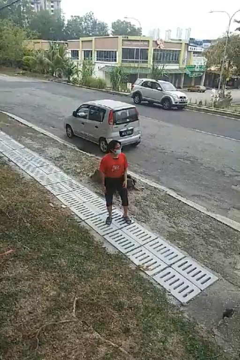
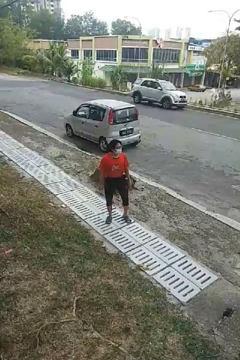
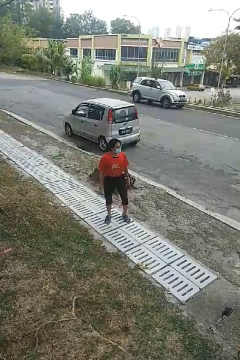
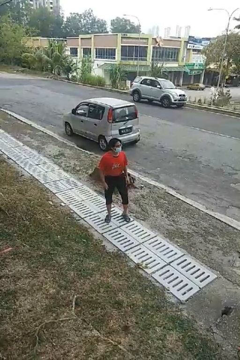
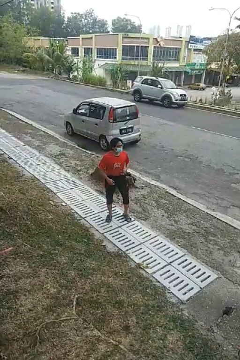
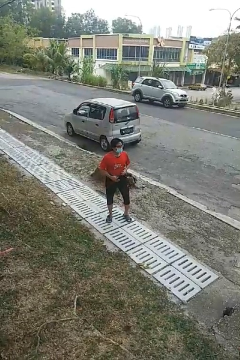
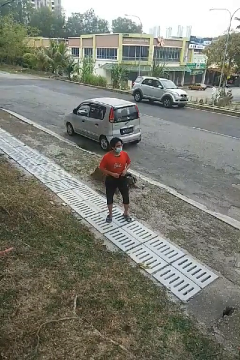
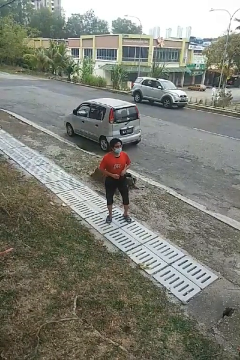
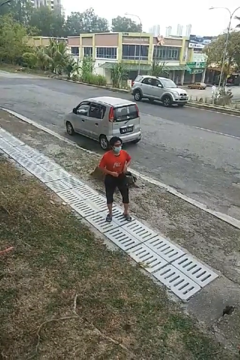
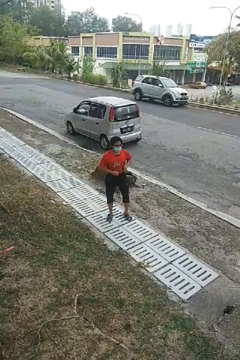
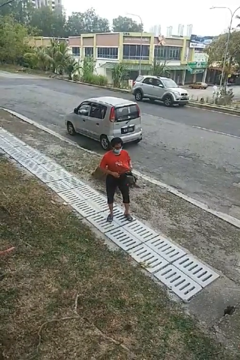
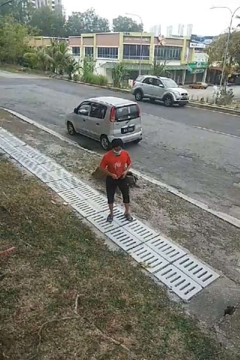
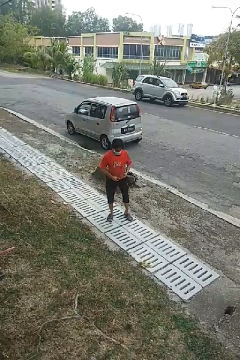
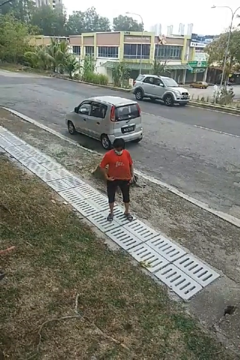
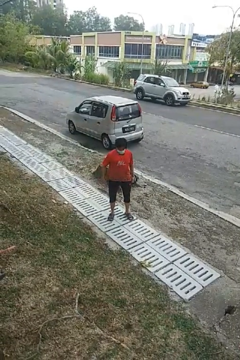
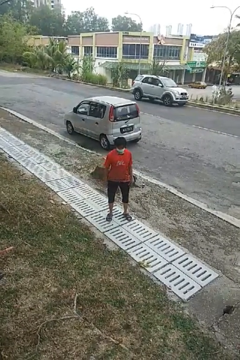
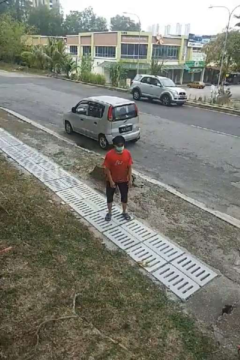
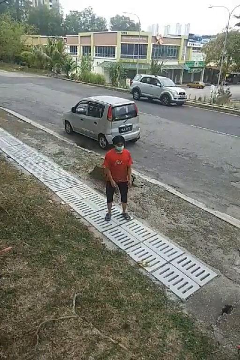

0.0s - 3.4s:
person untucks shirt

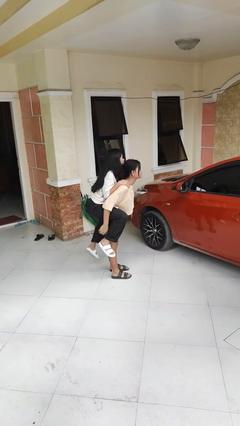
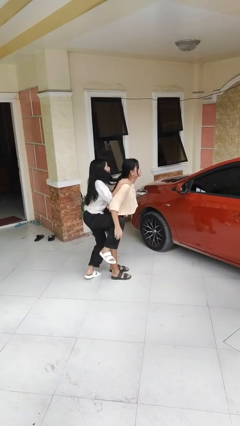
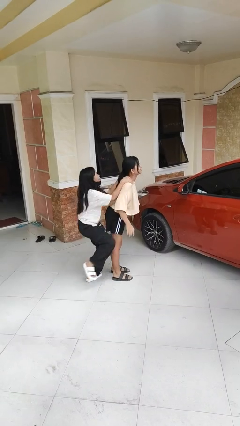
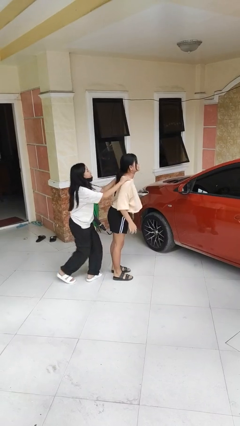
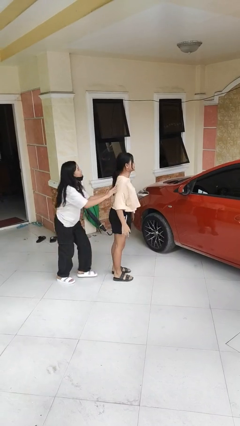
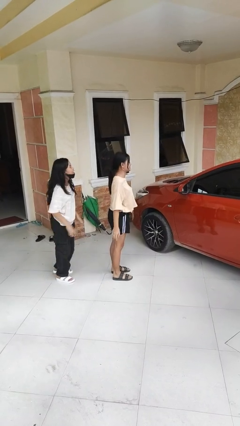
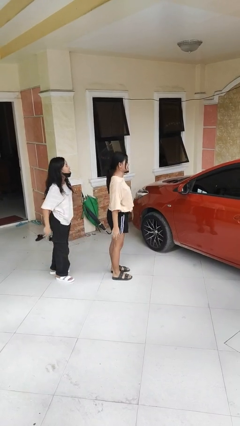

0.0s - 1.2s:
person puts down person

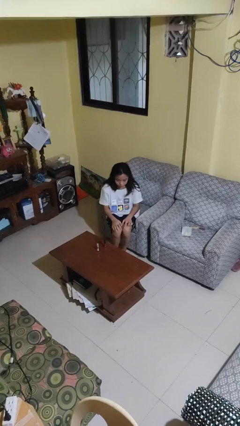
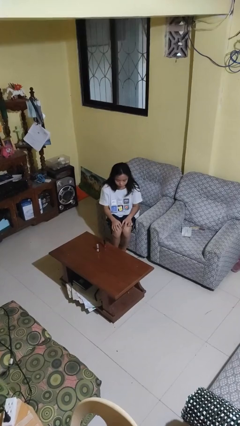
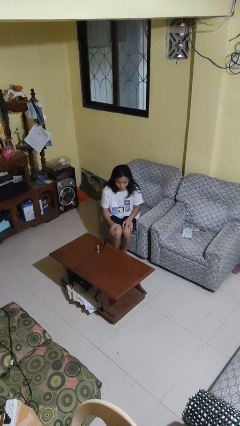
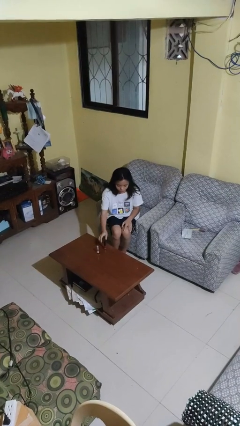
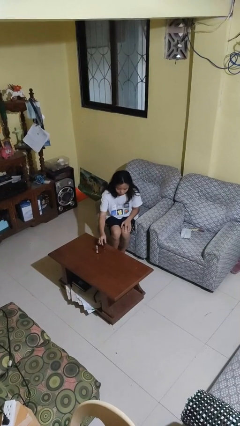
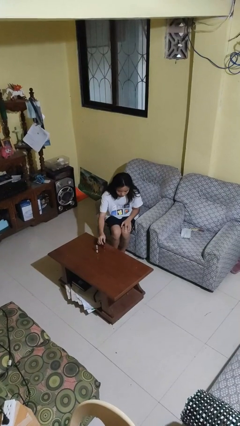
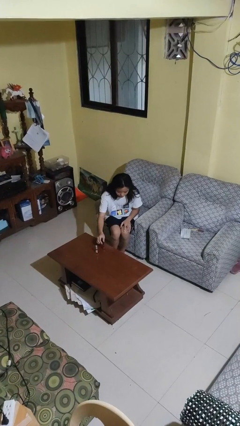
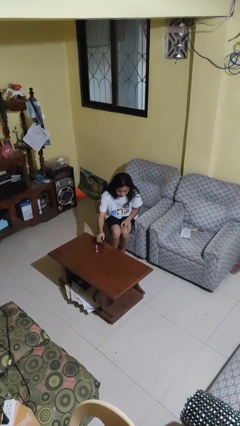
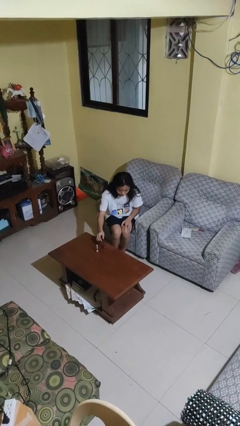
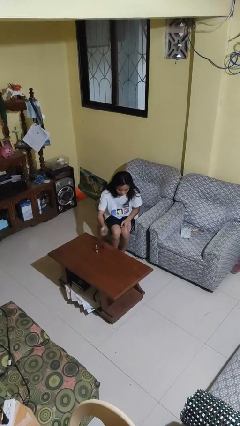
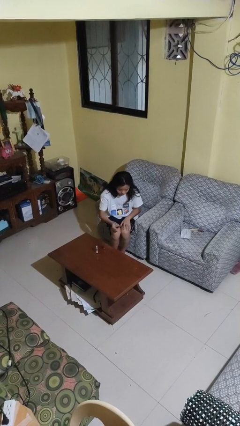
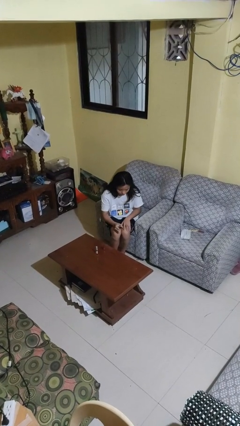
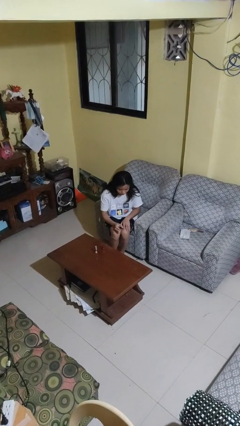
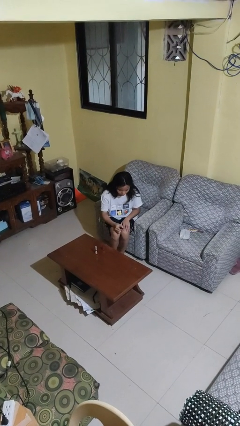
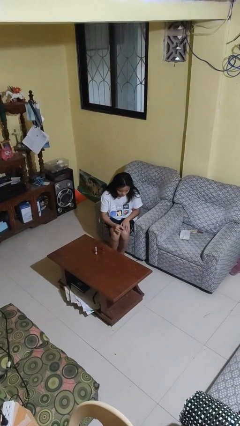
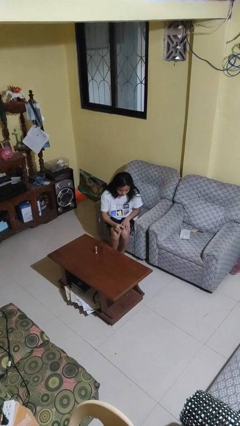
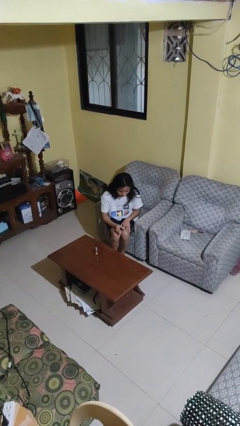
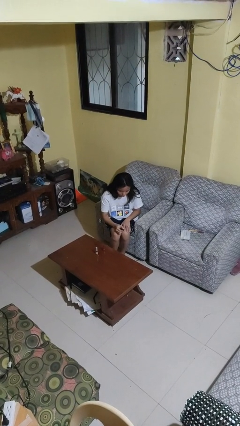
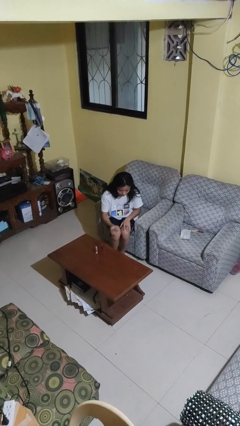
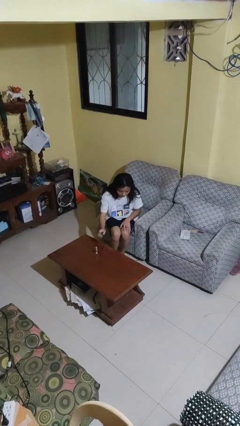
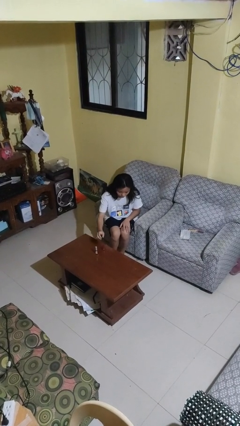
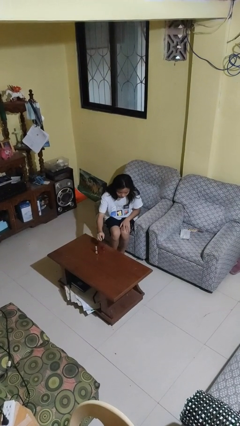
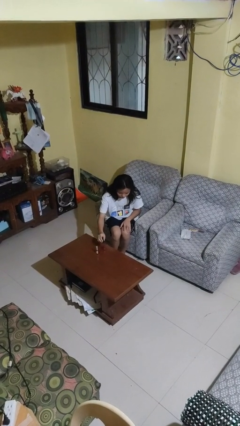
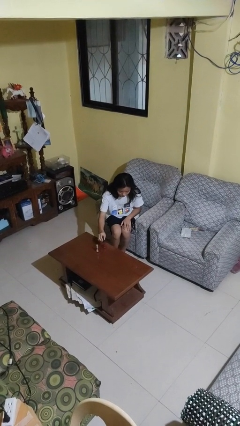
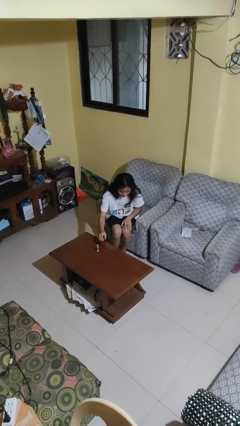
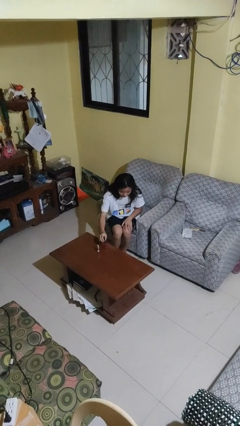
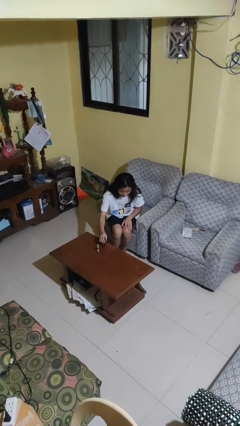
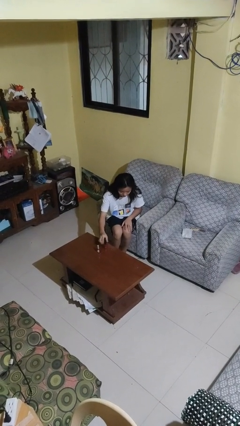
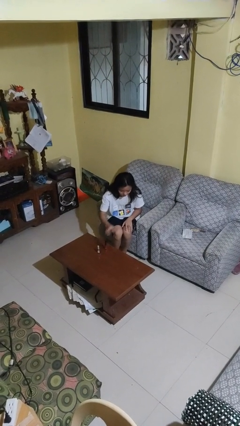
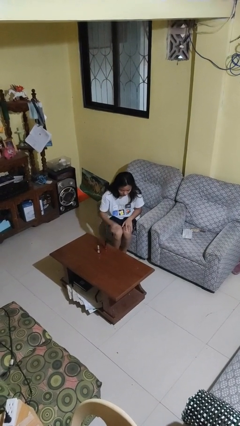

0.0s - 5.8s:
person paints fingernails

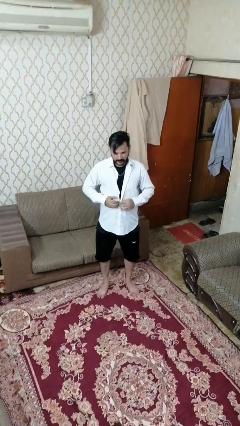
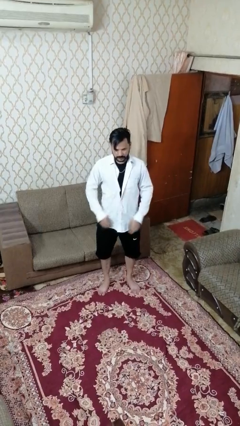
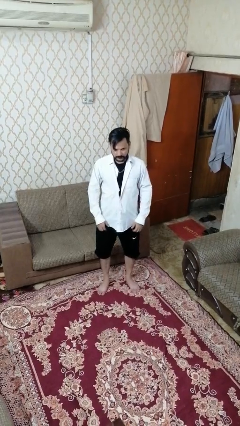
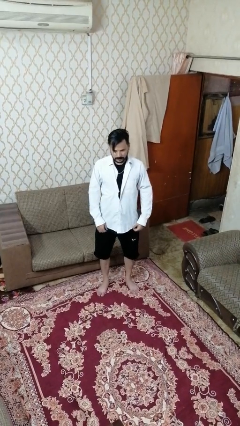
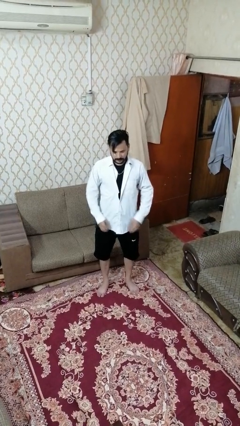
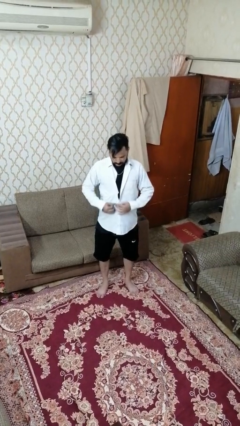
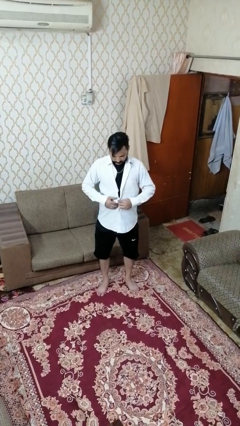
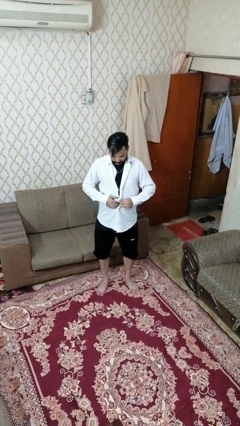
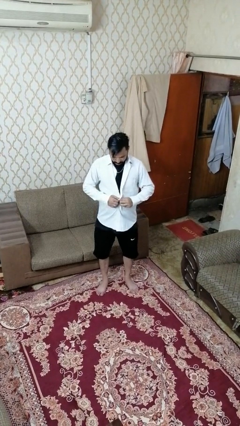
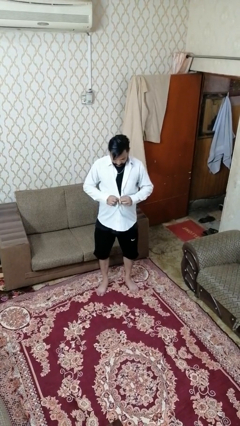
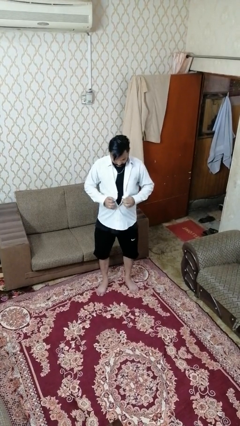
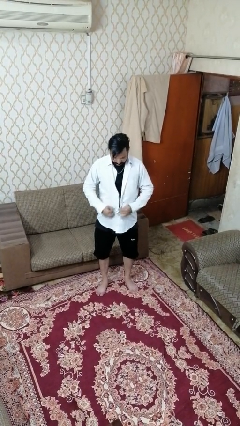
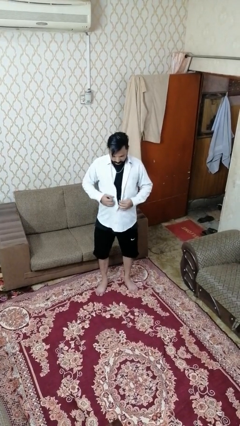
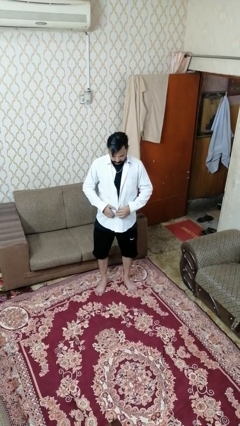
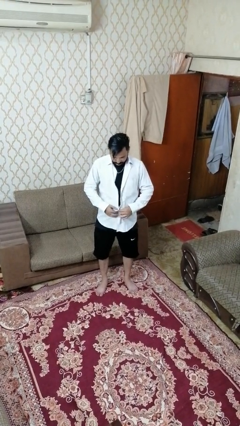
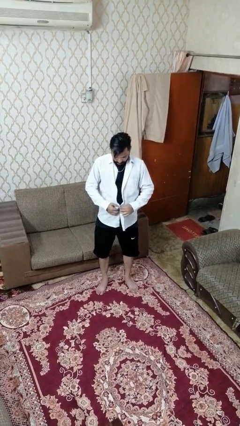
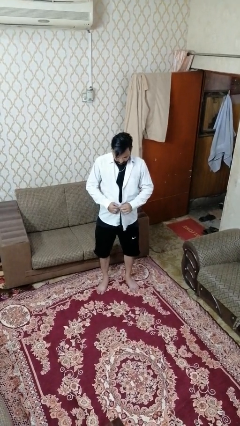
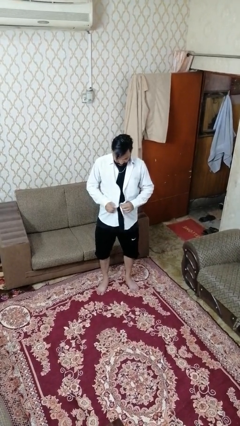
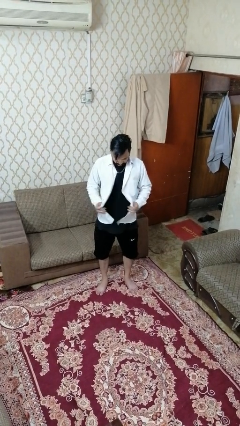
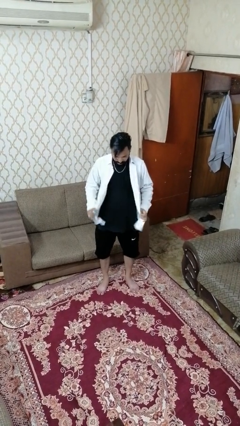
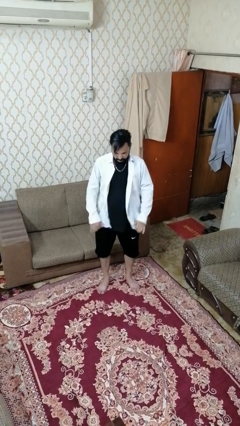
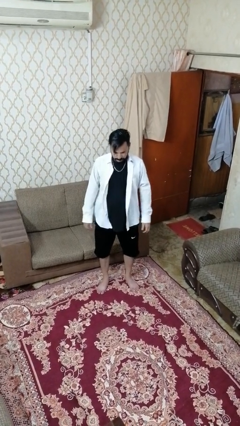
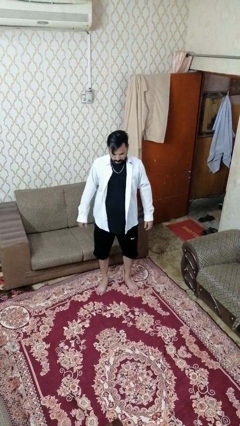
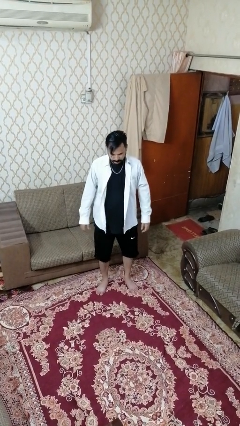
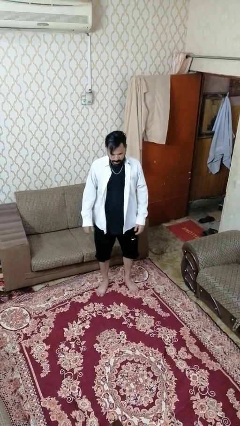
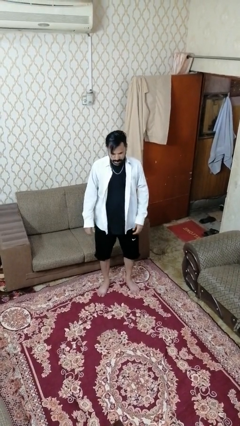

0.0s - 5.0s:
person unbuttons shirt

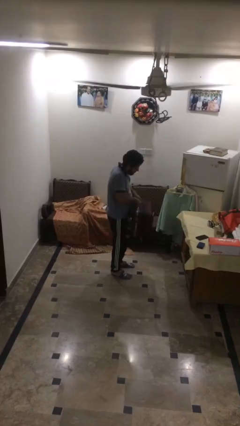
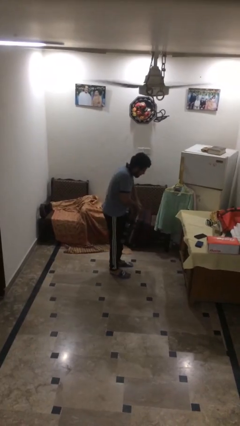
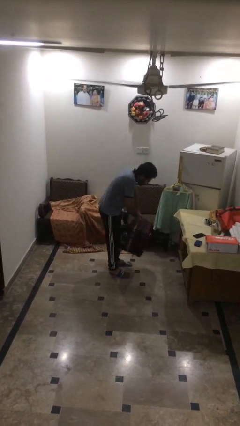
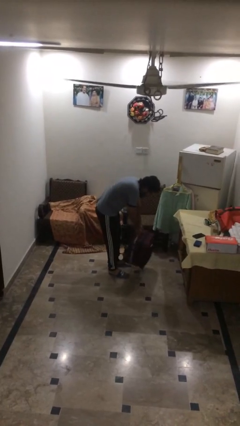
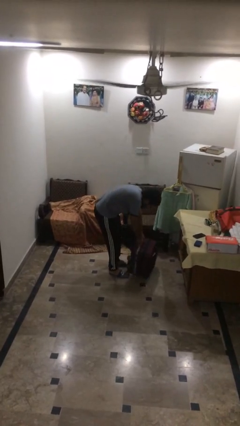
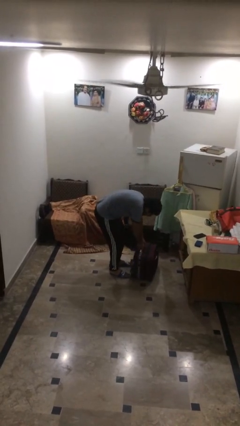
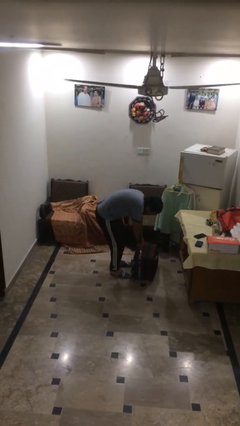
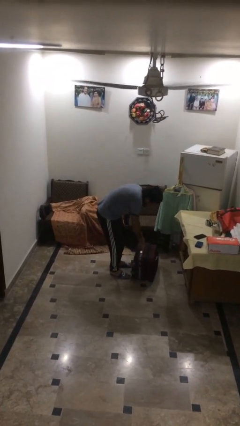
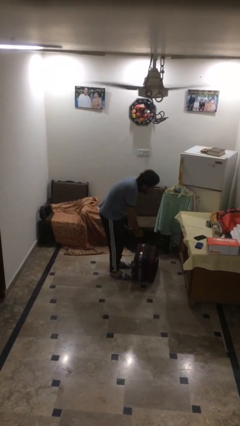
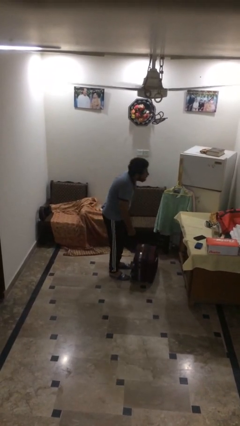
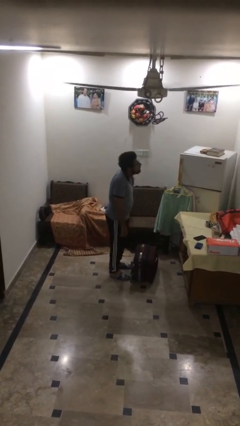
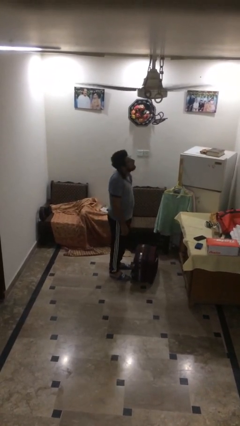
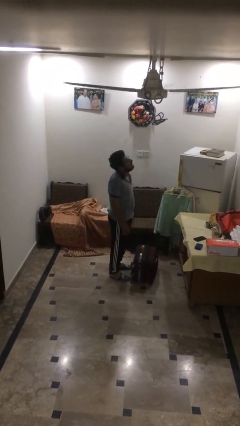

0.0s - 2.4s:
person puts down object on floor

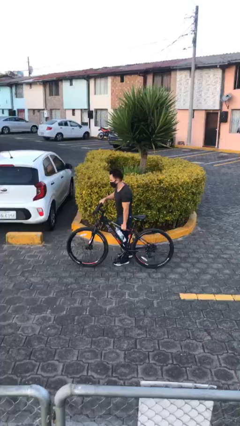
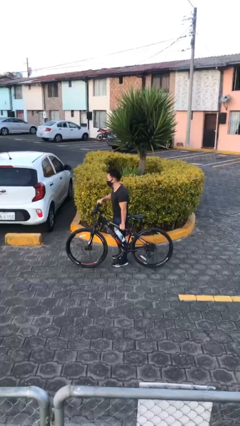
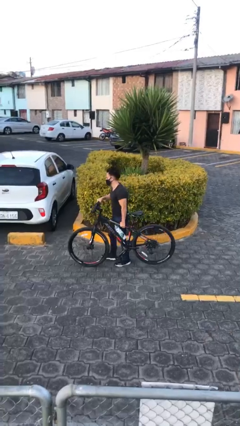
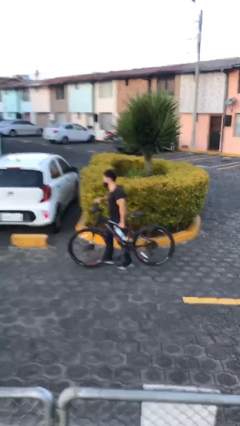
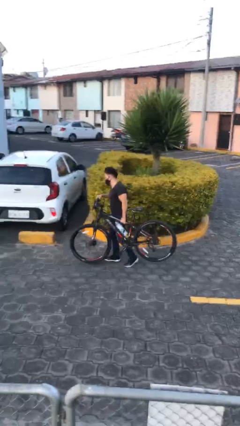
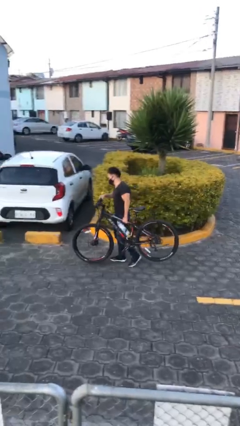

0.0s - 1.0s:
person picks up object from floor
